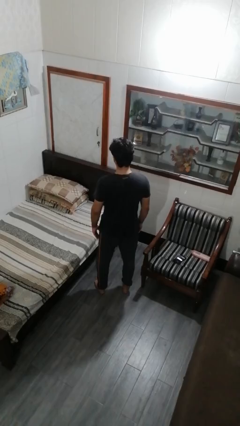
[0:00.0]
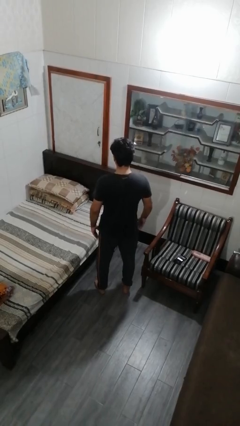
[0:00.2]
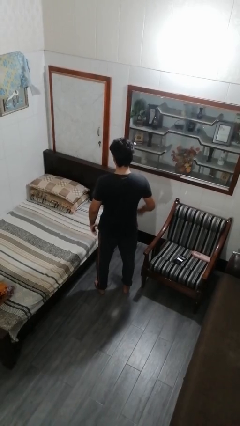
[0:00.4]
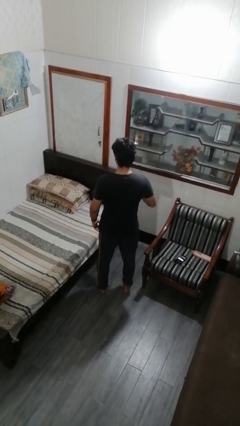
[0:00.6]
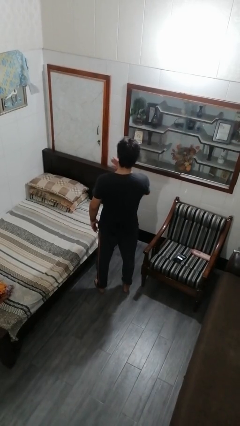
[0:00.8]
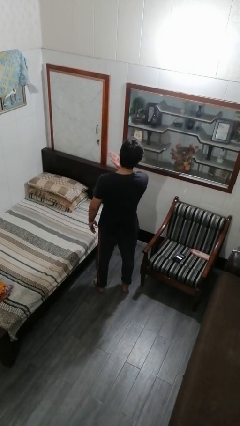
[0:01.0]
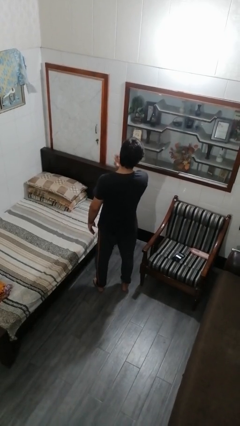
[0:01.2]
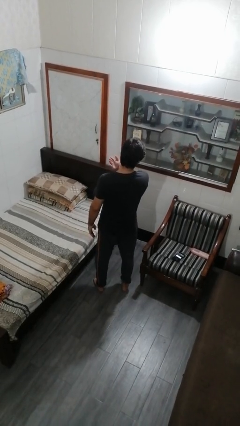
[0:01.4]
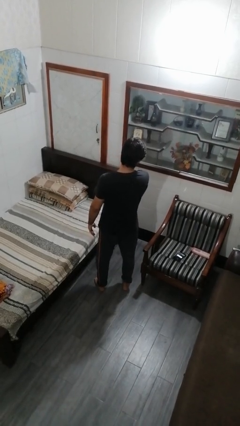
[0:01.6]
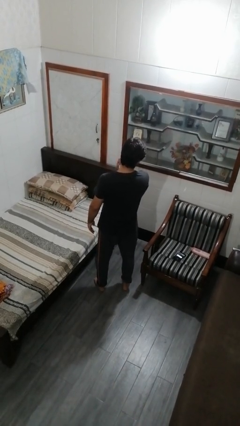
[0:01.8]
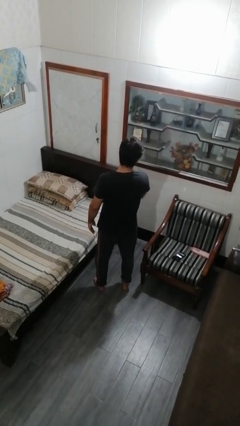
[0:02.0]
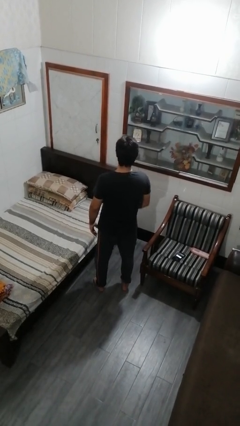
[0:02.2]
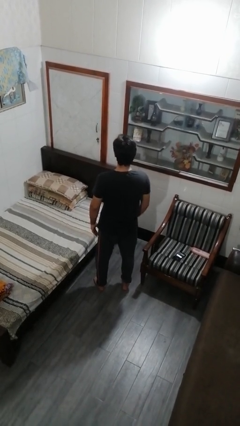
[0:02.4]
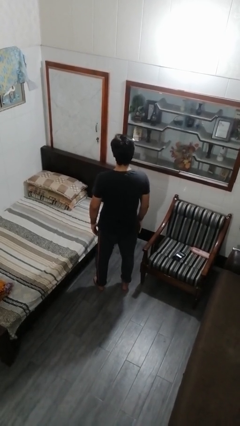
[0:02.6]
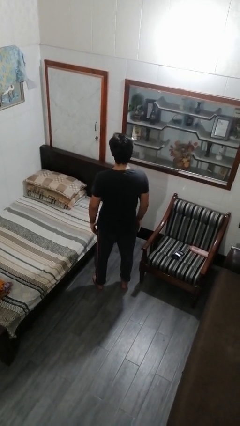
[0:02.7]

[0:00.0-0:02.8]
person swats bug

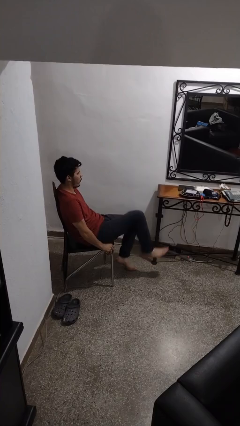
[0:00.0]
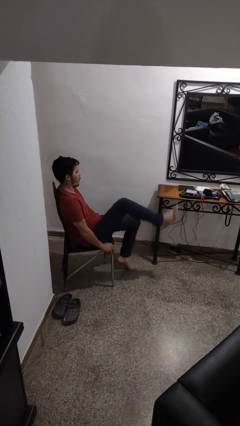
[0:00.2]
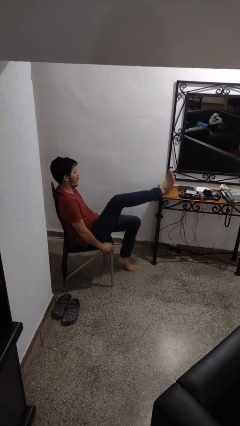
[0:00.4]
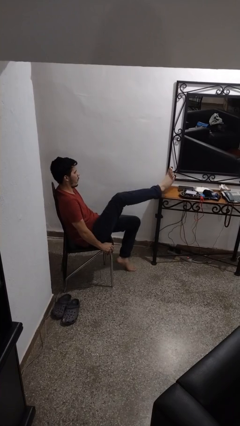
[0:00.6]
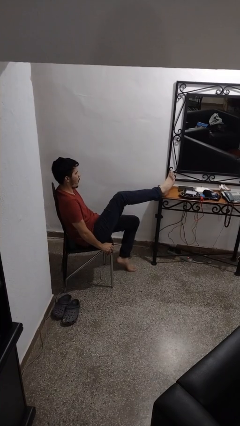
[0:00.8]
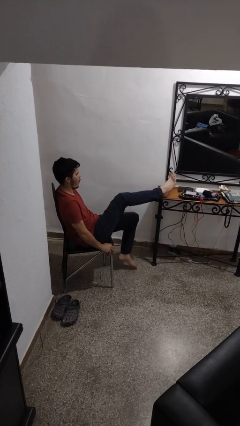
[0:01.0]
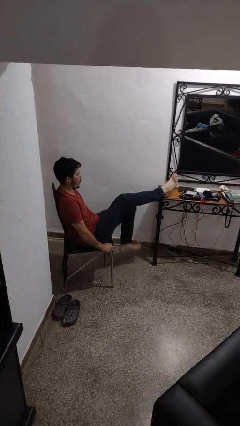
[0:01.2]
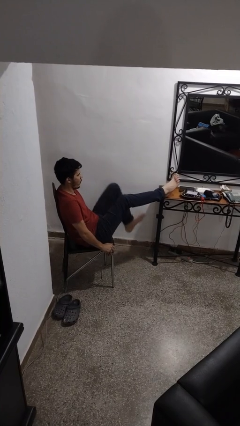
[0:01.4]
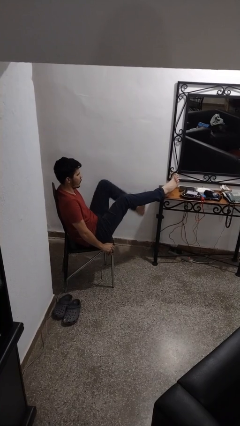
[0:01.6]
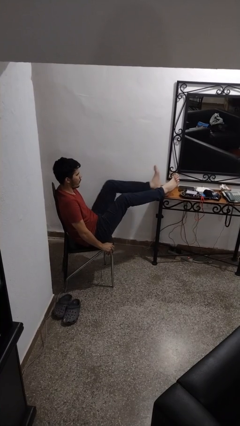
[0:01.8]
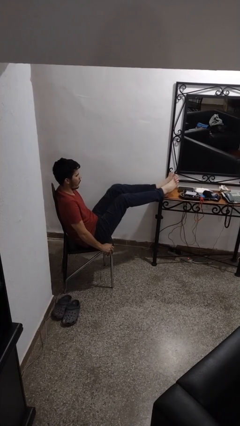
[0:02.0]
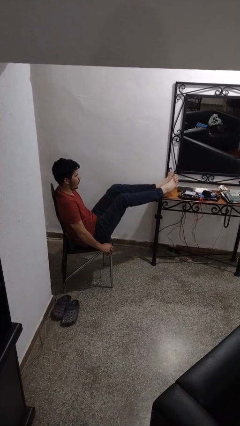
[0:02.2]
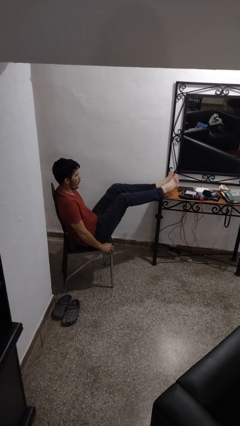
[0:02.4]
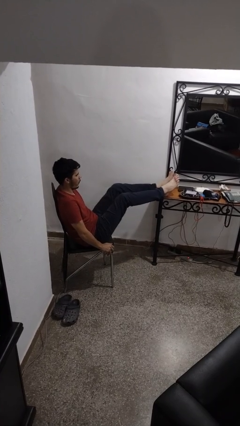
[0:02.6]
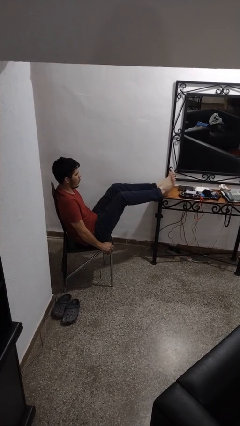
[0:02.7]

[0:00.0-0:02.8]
person puts feet up

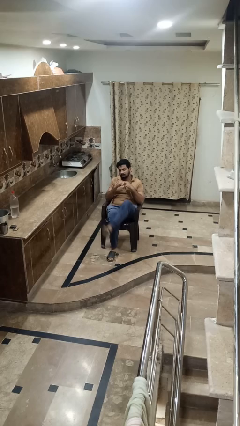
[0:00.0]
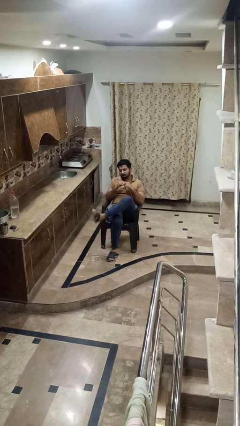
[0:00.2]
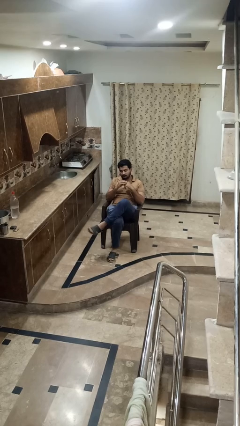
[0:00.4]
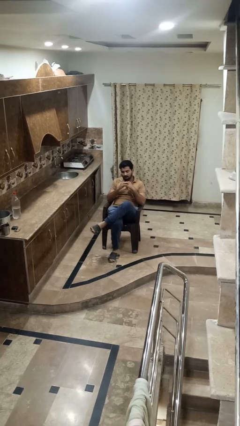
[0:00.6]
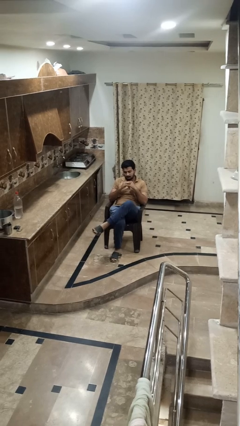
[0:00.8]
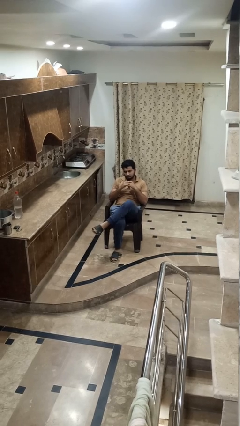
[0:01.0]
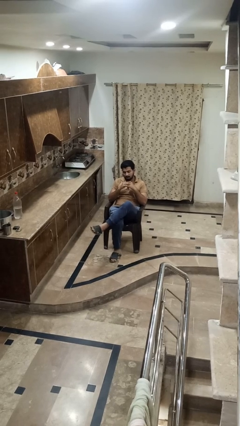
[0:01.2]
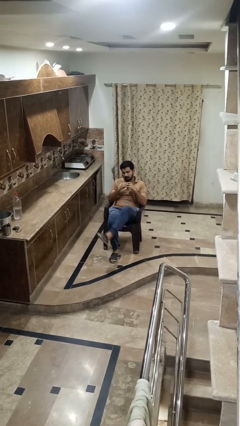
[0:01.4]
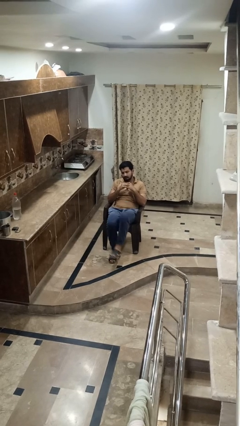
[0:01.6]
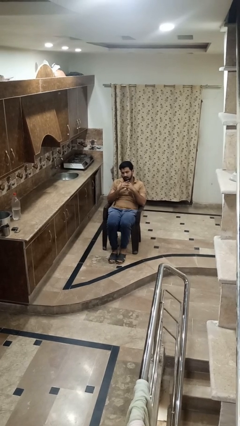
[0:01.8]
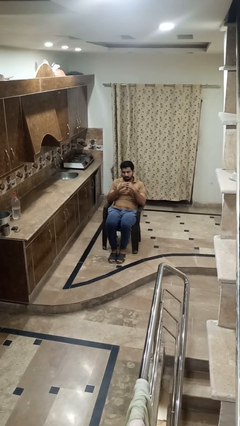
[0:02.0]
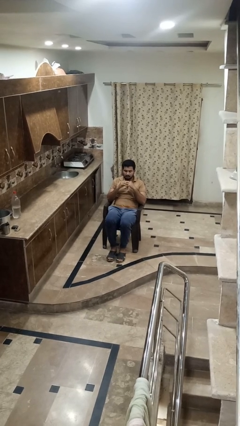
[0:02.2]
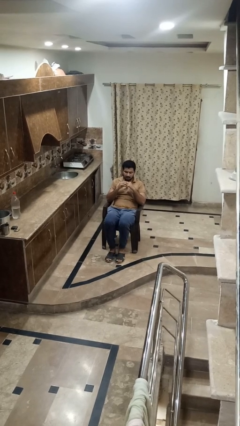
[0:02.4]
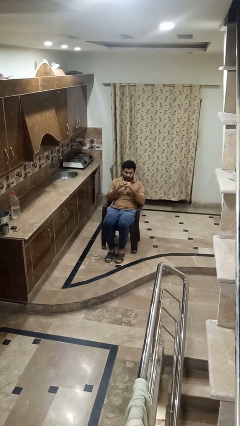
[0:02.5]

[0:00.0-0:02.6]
person crosses legs

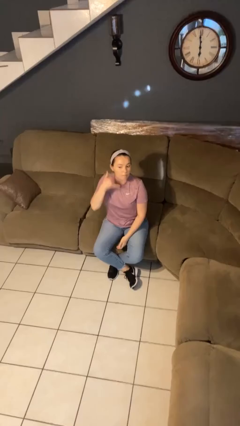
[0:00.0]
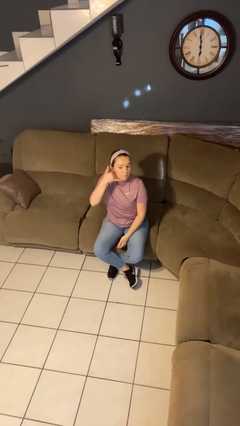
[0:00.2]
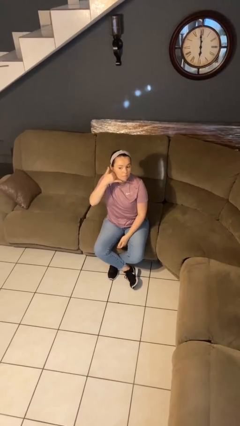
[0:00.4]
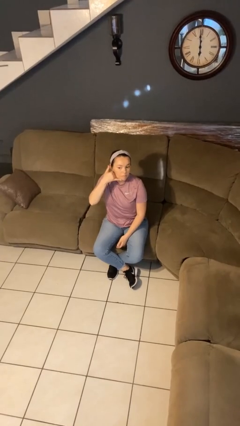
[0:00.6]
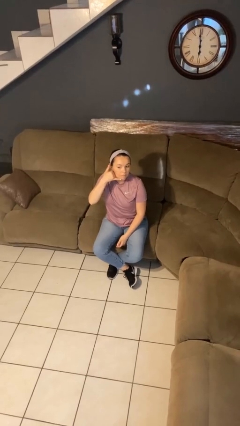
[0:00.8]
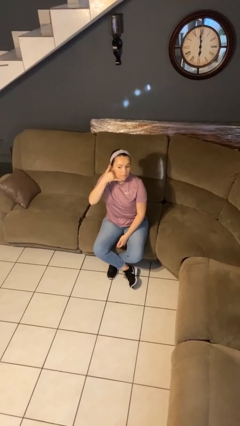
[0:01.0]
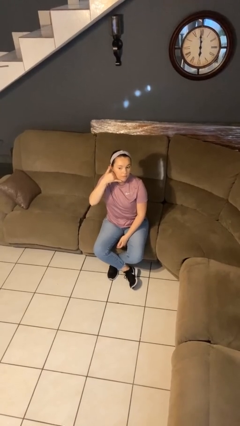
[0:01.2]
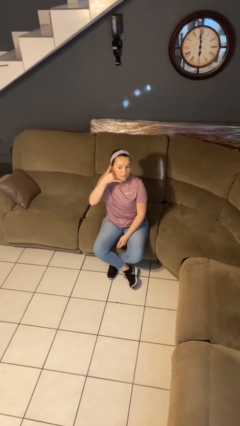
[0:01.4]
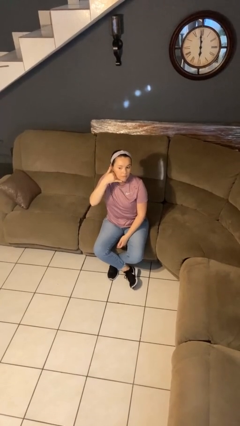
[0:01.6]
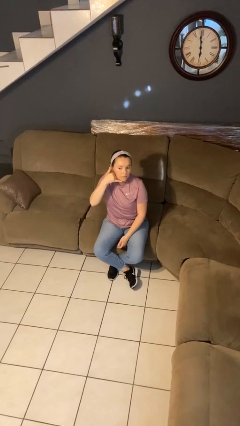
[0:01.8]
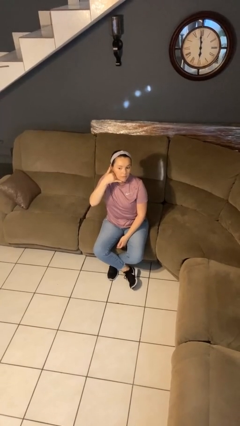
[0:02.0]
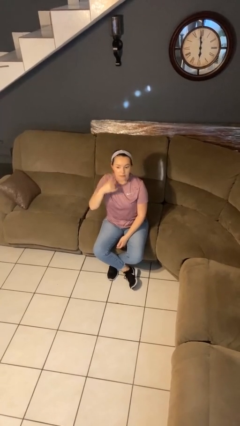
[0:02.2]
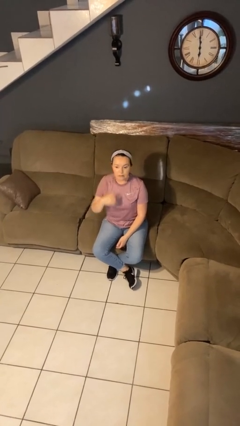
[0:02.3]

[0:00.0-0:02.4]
person gestures call me

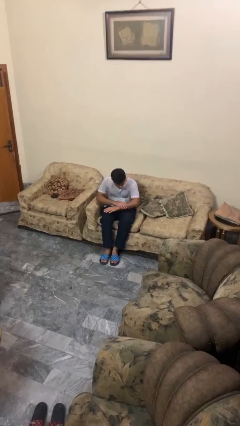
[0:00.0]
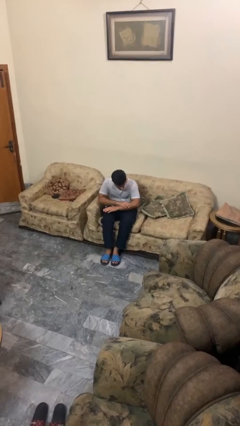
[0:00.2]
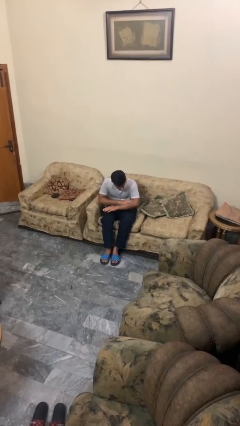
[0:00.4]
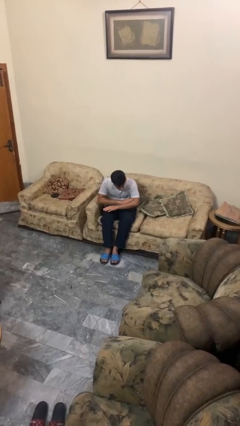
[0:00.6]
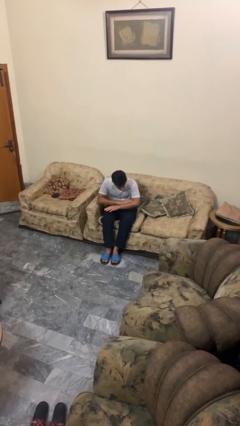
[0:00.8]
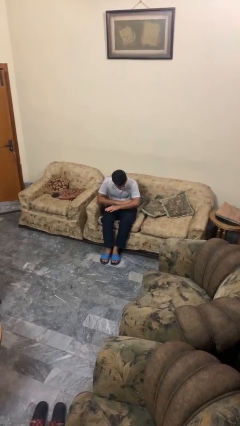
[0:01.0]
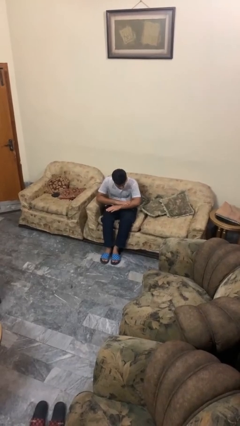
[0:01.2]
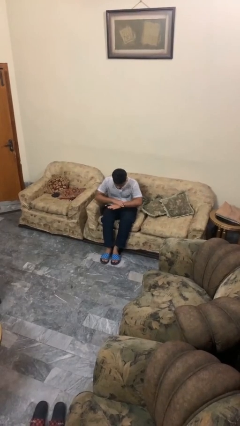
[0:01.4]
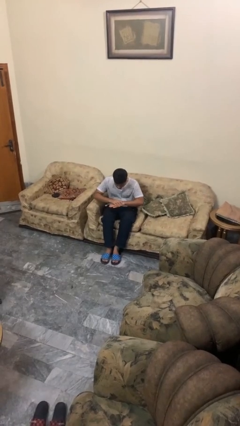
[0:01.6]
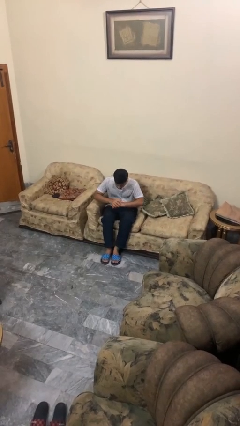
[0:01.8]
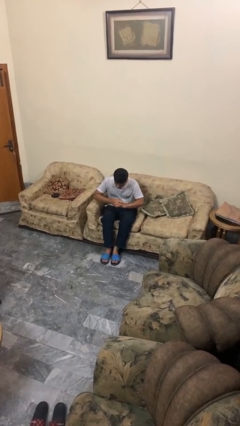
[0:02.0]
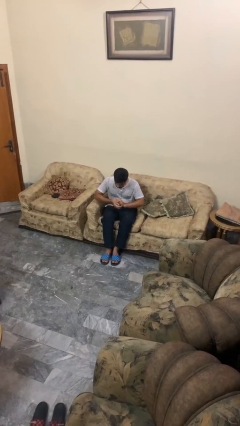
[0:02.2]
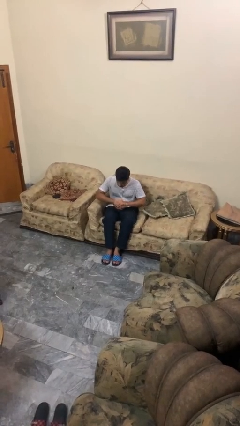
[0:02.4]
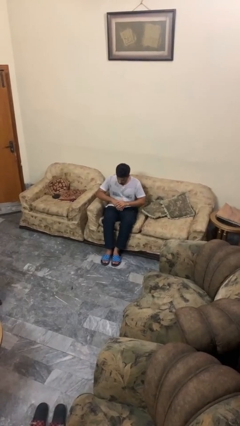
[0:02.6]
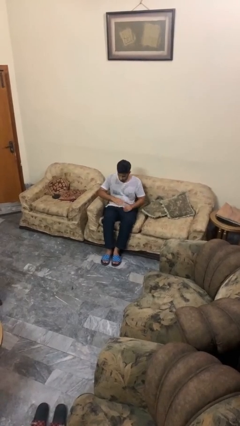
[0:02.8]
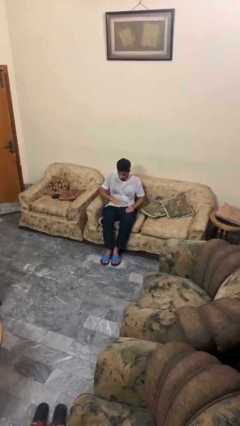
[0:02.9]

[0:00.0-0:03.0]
person looks at hands in lap

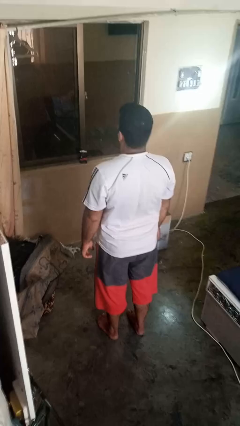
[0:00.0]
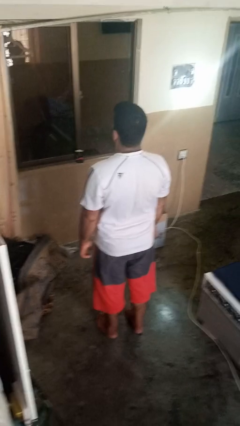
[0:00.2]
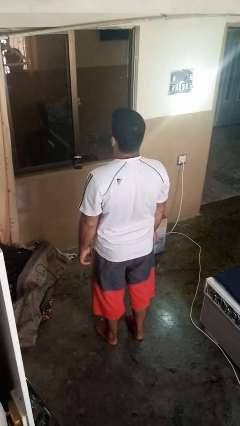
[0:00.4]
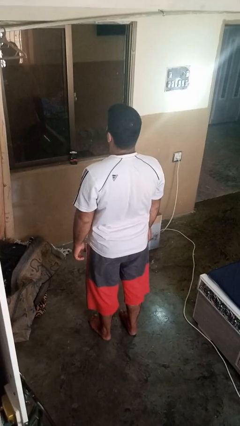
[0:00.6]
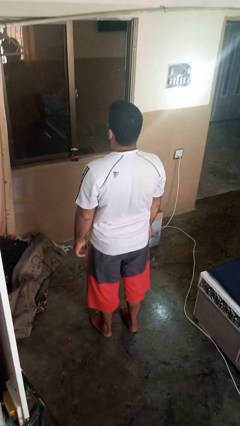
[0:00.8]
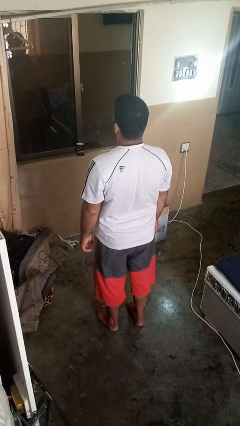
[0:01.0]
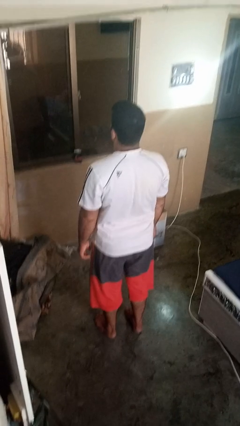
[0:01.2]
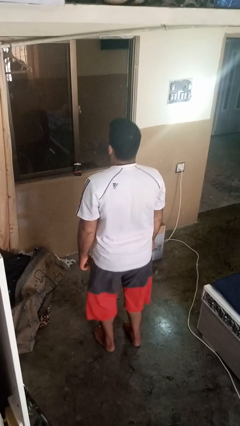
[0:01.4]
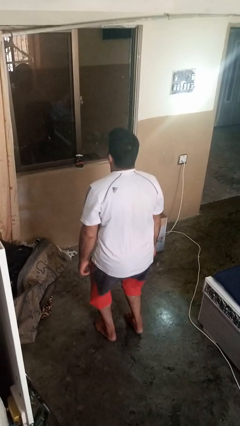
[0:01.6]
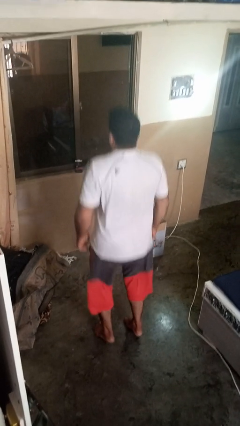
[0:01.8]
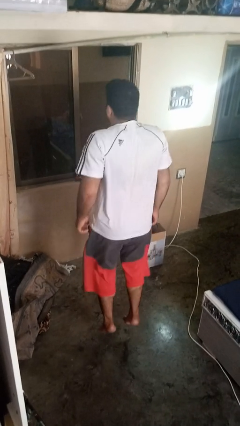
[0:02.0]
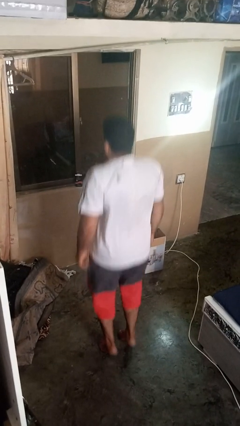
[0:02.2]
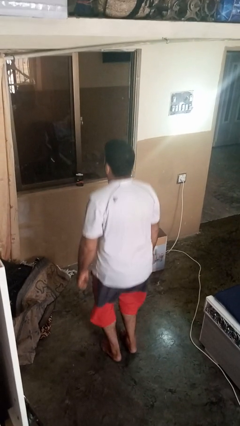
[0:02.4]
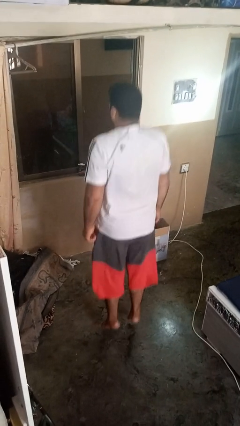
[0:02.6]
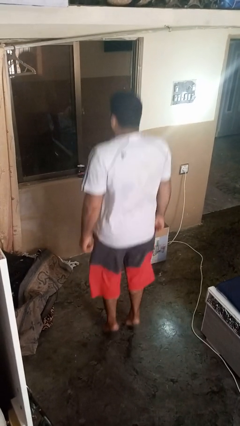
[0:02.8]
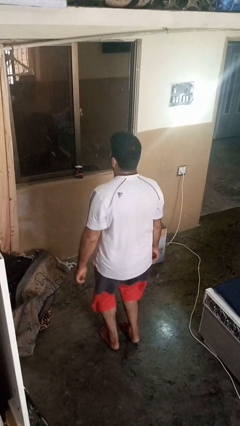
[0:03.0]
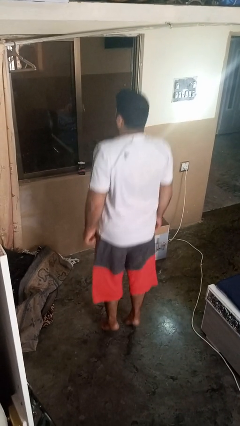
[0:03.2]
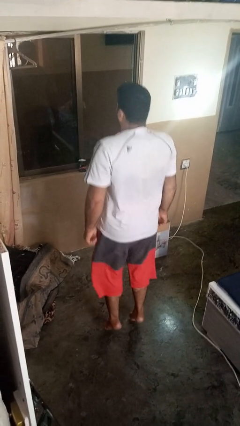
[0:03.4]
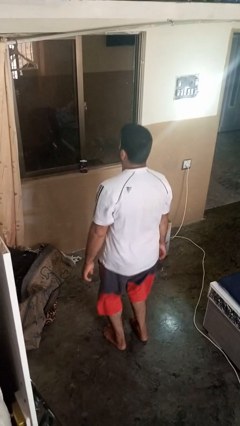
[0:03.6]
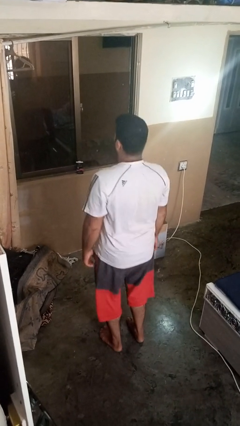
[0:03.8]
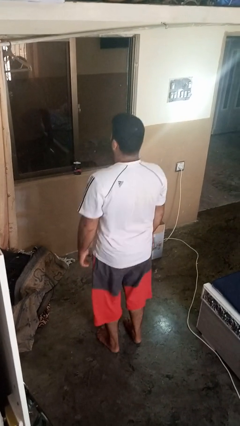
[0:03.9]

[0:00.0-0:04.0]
person jumps
